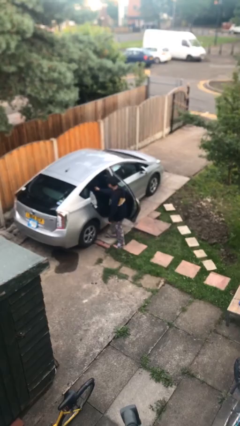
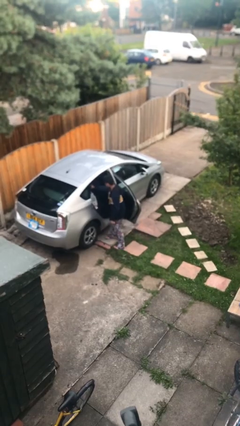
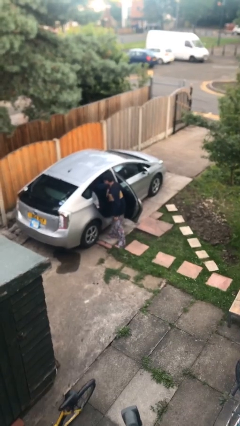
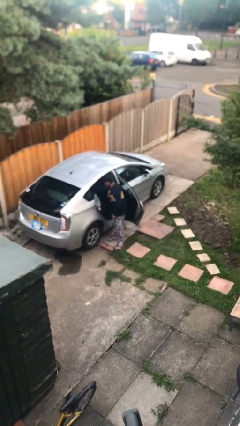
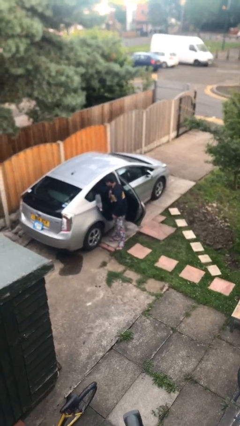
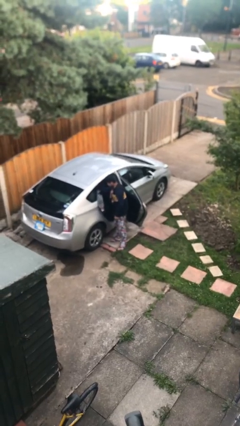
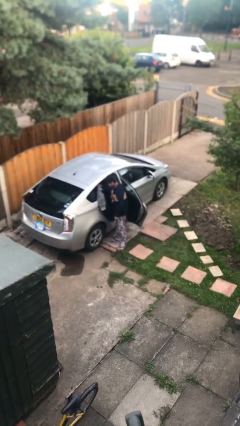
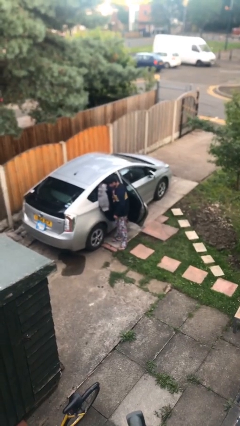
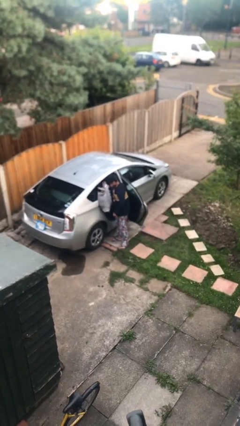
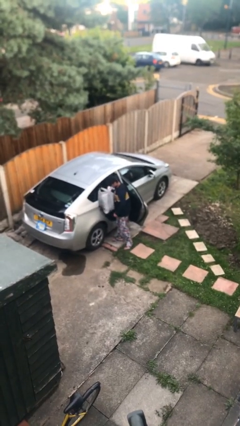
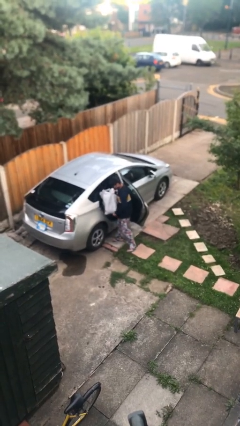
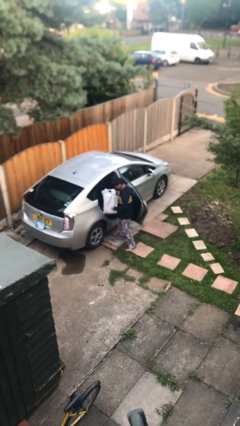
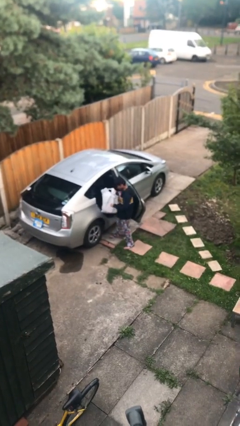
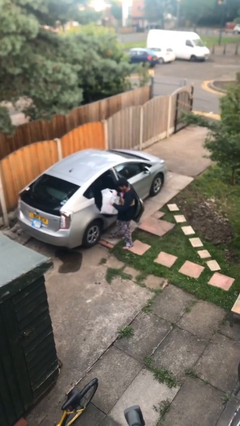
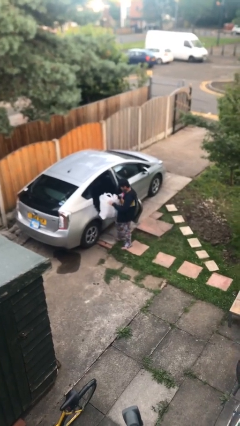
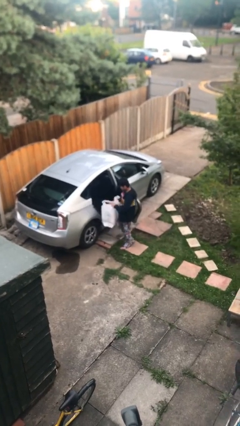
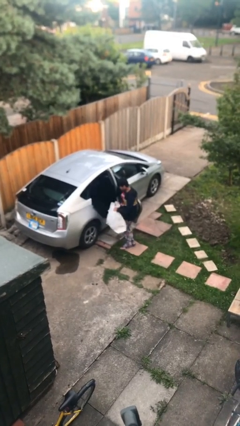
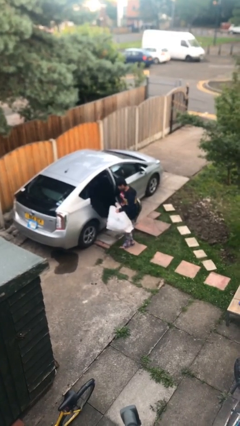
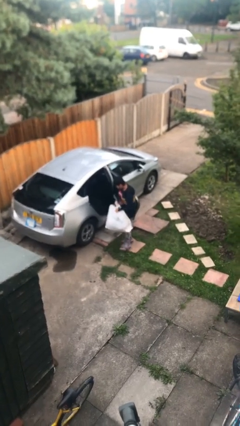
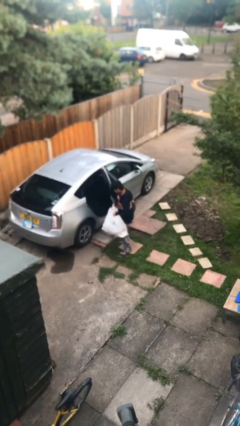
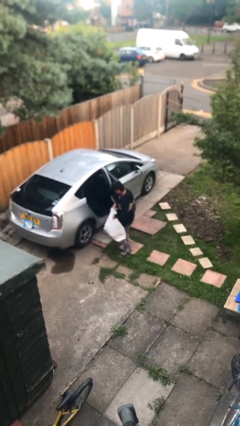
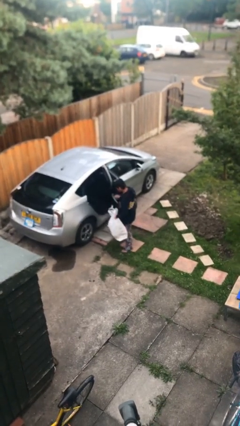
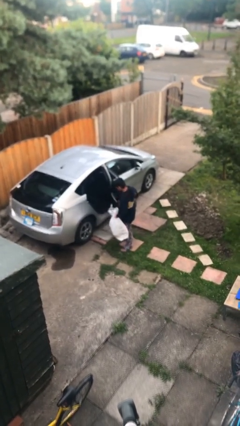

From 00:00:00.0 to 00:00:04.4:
person unloads car

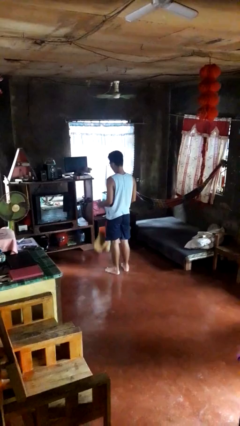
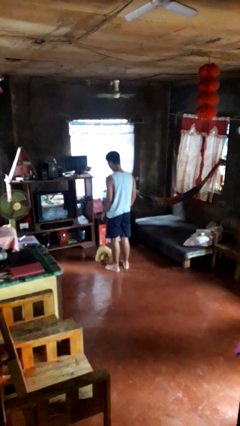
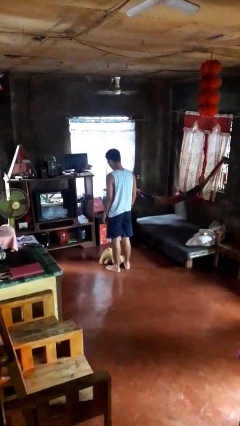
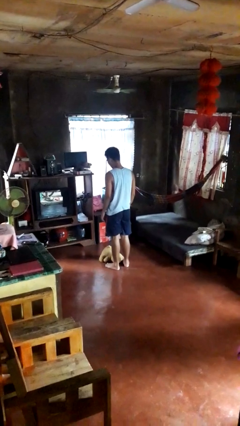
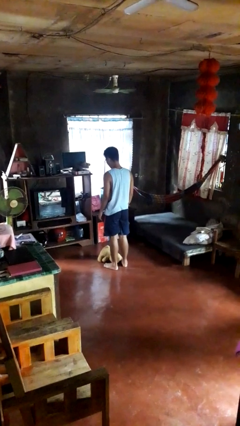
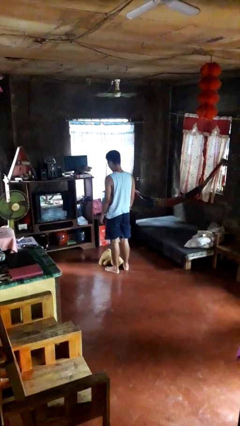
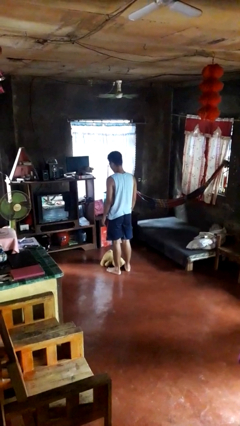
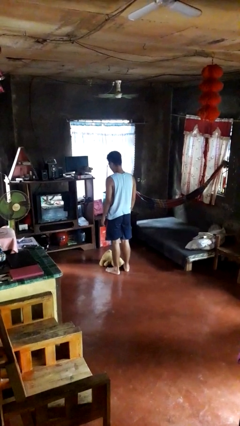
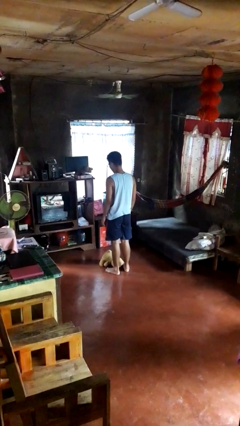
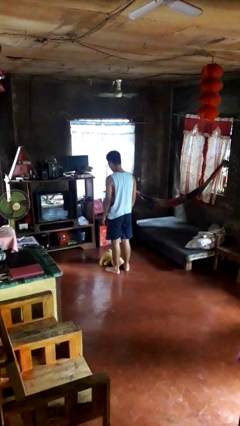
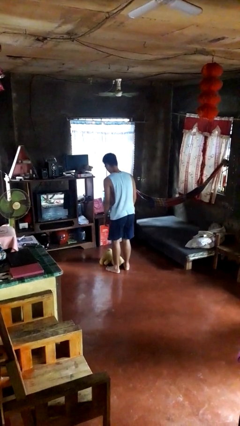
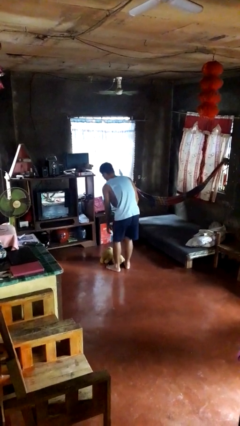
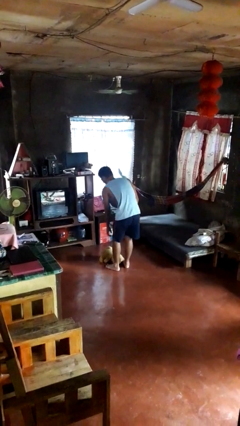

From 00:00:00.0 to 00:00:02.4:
person drops object

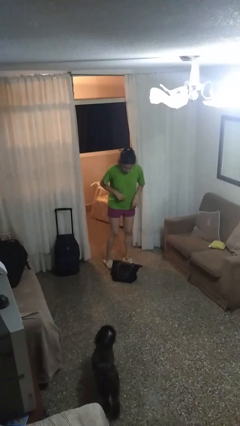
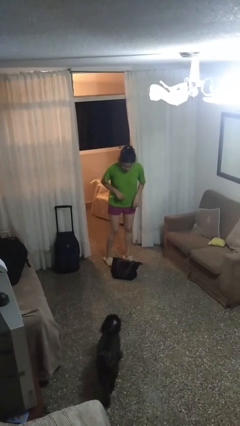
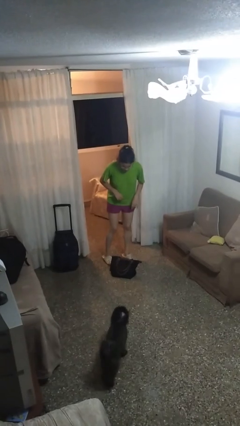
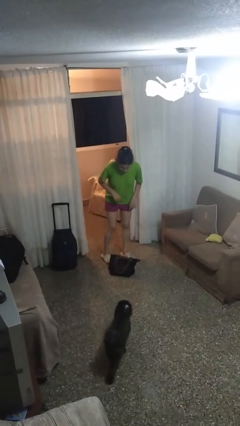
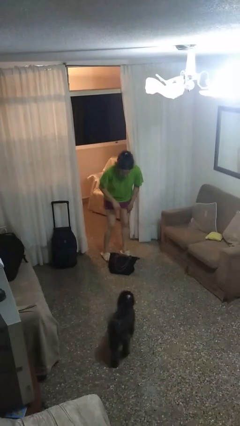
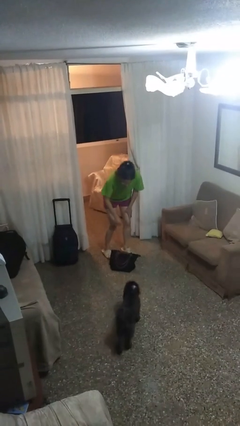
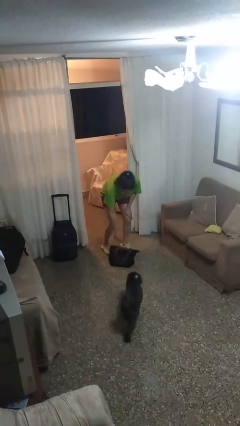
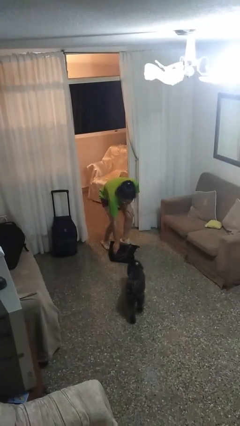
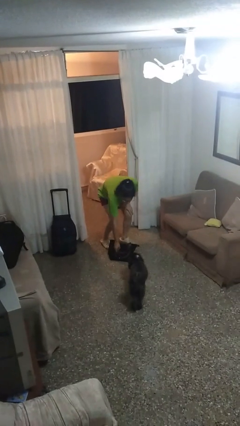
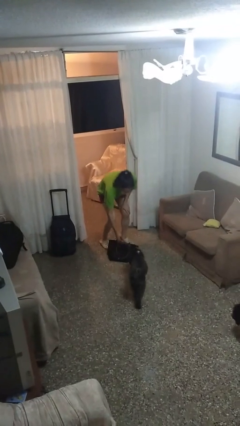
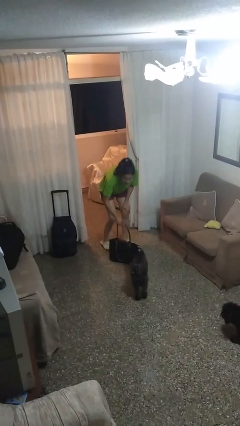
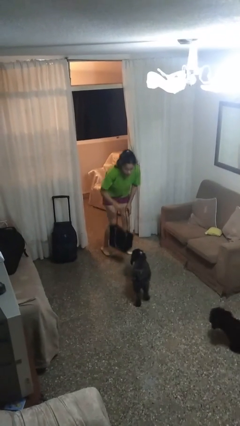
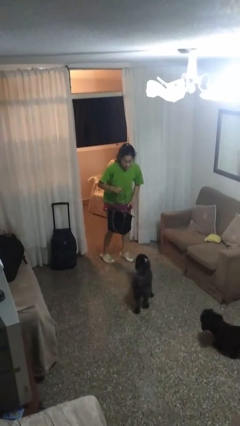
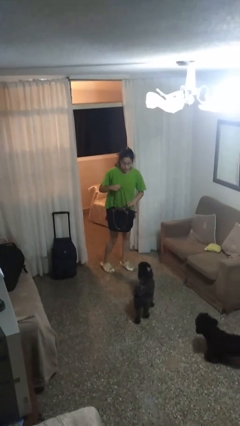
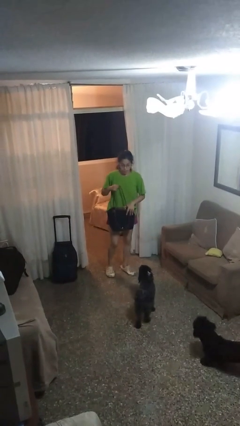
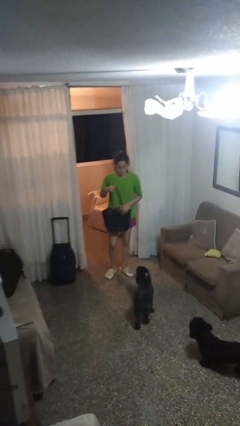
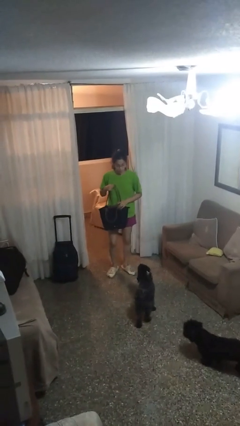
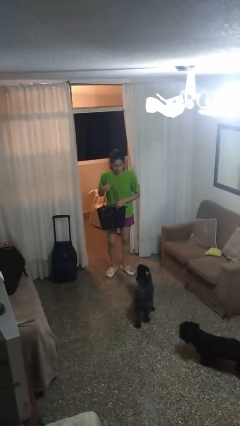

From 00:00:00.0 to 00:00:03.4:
person picks up object from floor

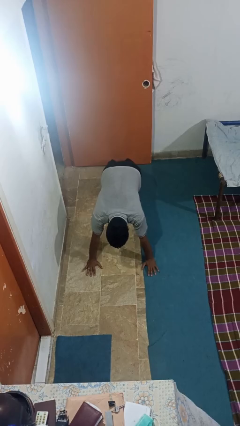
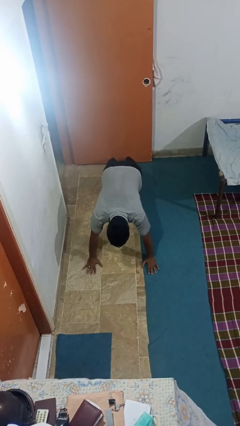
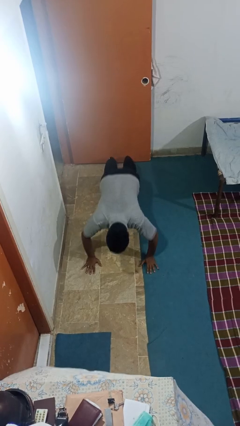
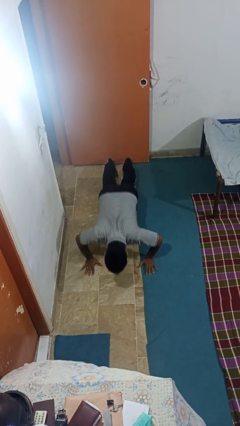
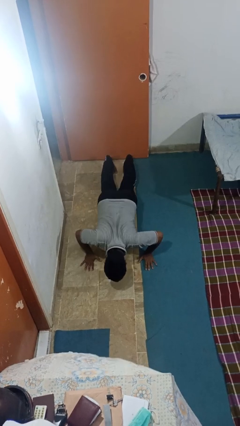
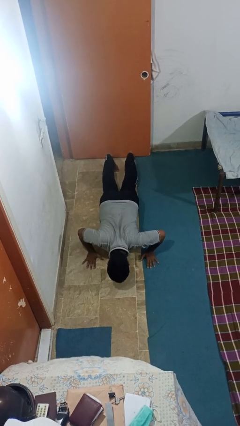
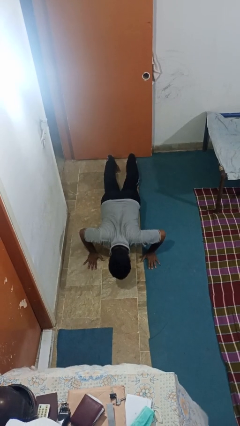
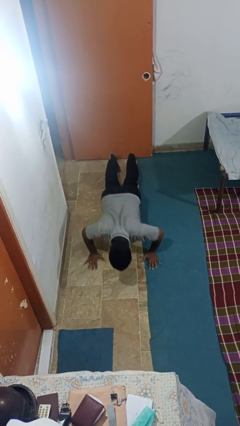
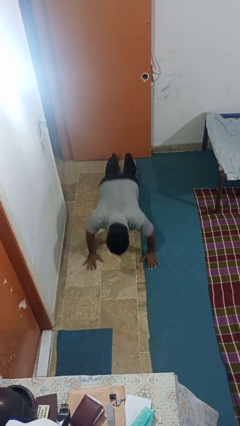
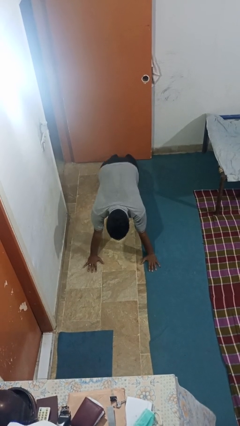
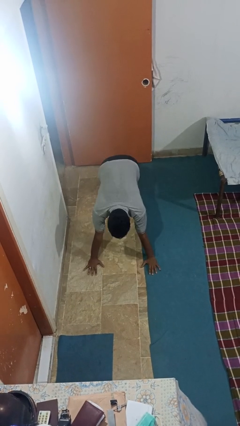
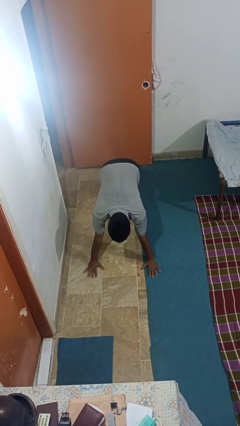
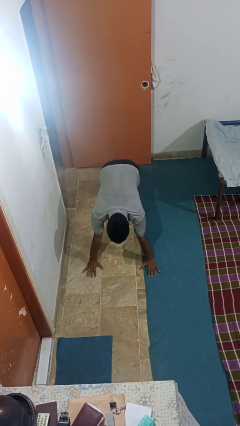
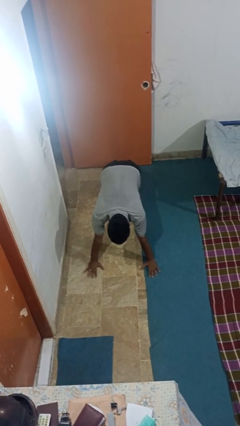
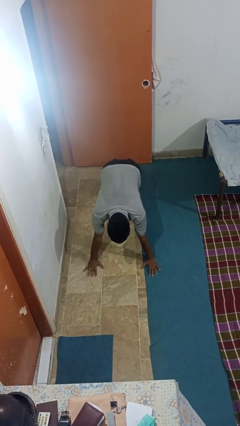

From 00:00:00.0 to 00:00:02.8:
person exercises with pushup

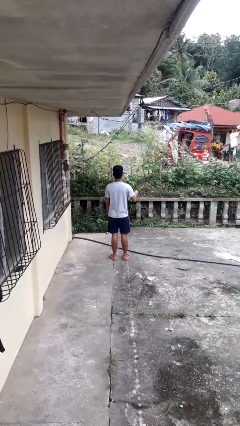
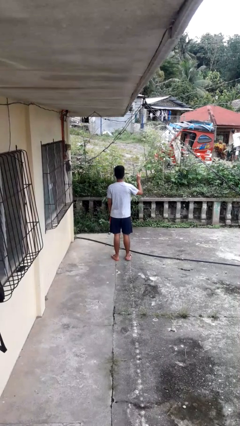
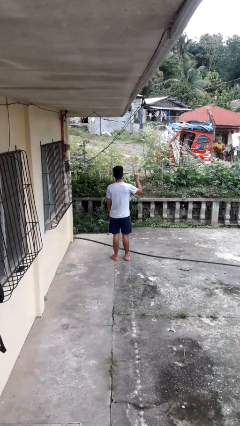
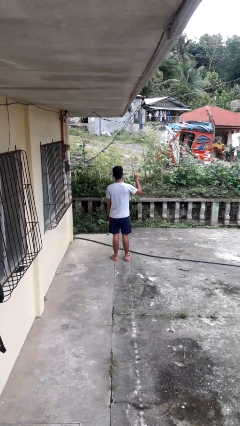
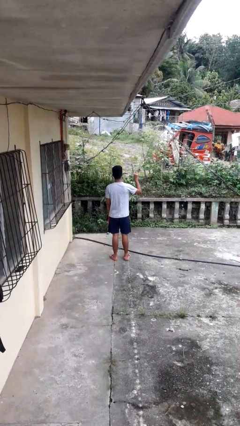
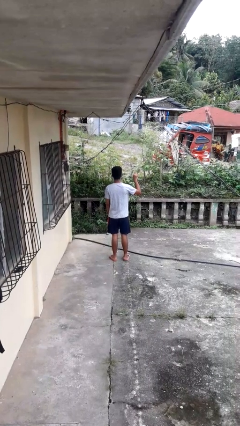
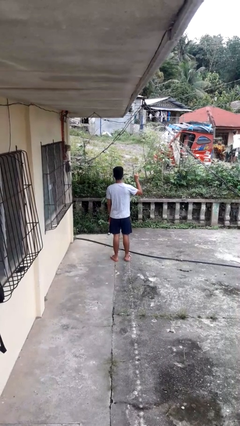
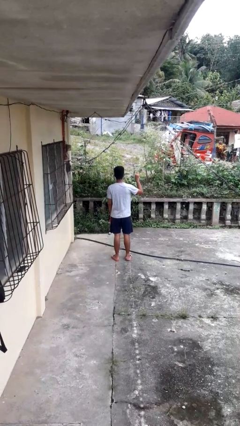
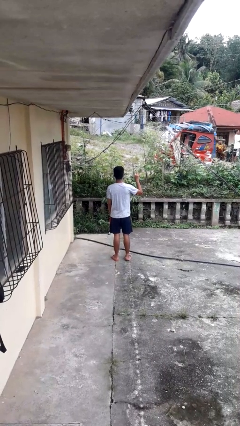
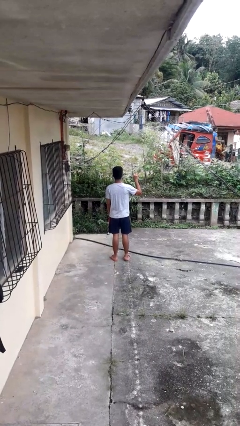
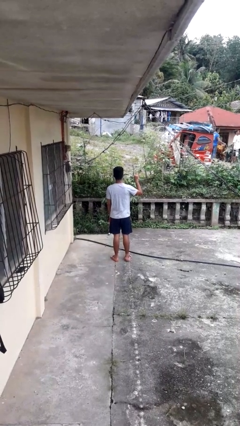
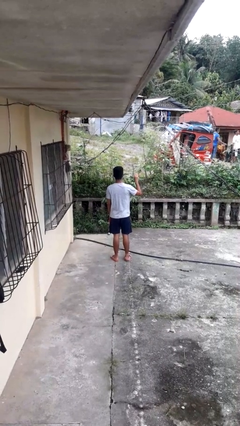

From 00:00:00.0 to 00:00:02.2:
person gestures peace

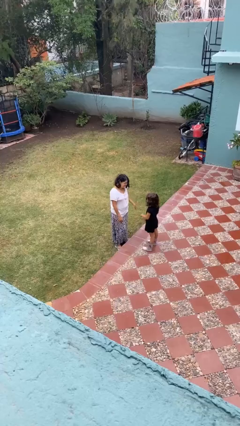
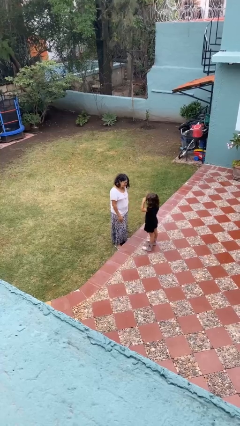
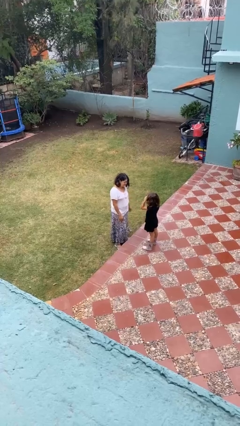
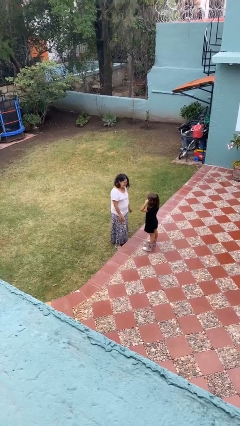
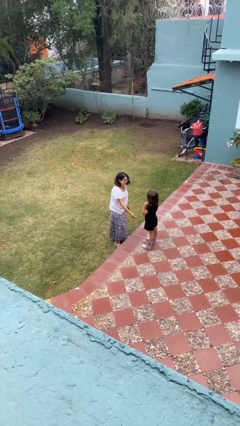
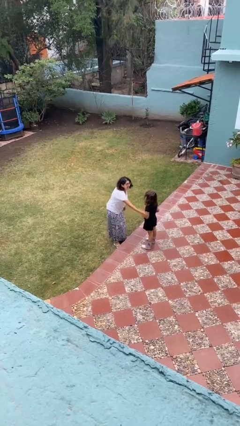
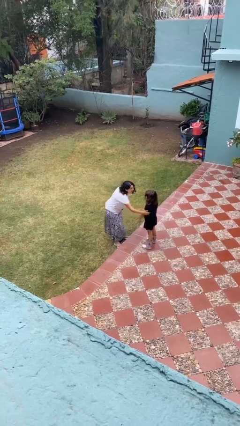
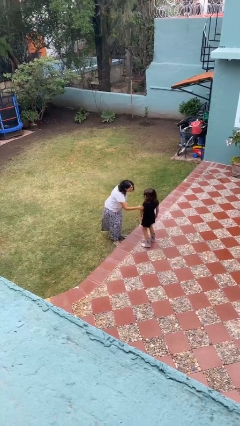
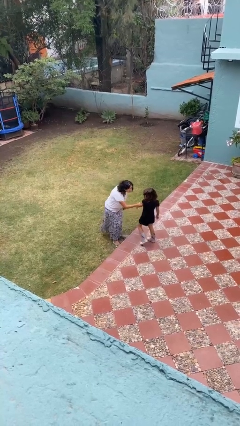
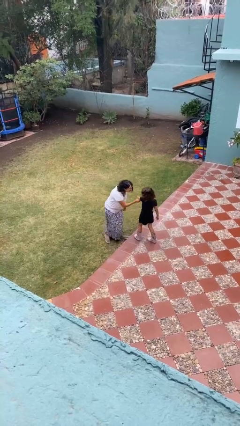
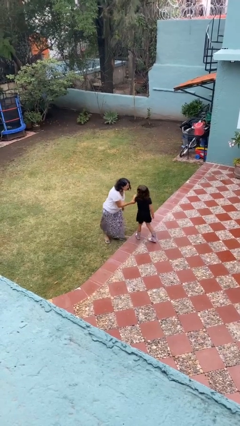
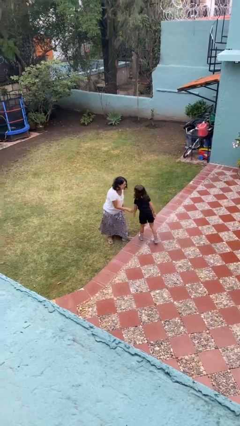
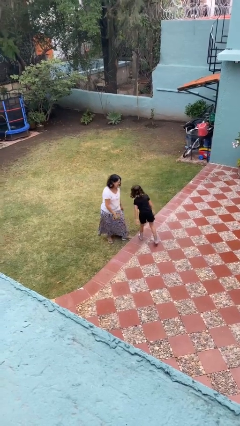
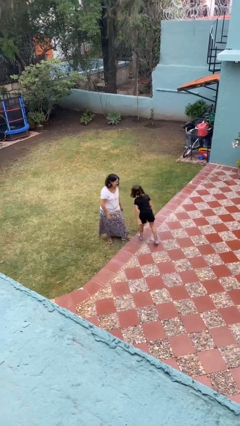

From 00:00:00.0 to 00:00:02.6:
person grabs person by bicep
